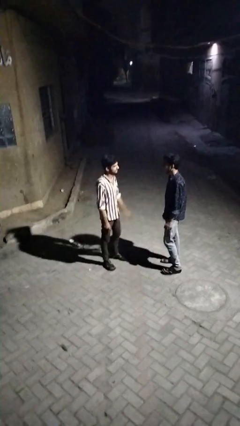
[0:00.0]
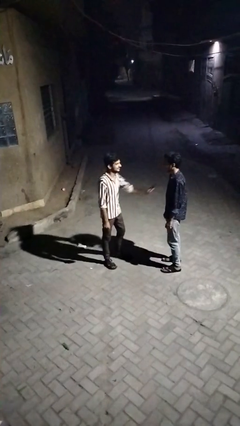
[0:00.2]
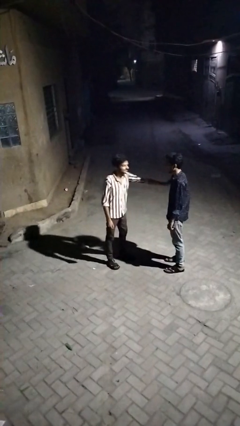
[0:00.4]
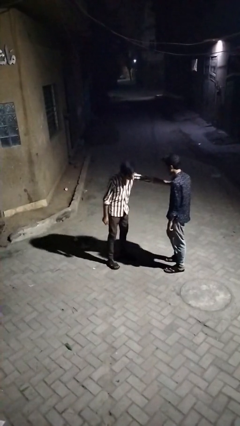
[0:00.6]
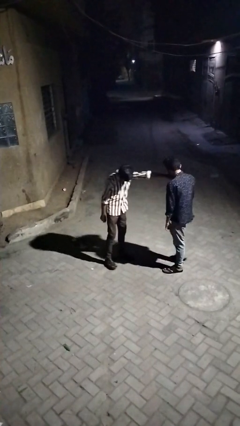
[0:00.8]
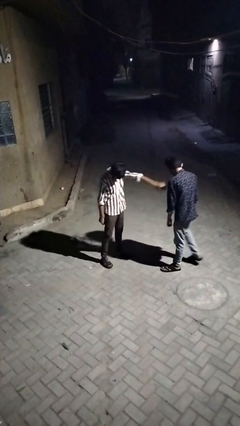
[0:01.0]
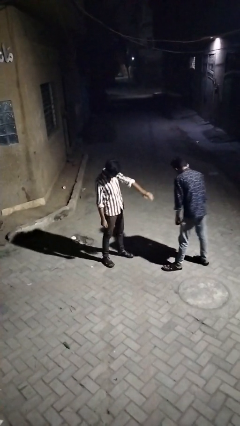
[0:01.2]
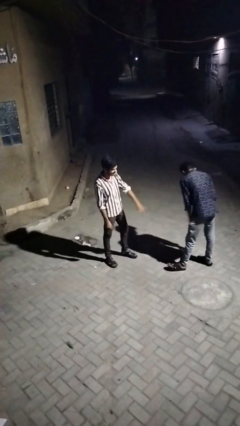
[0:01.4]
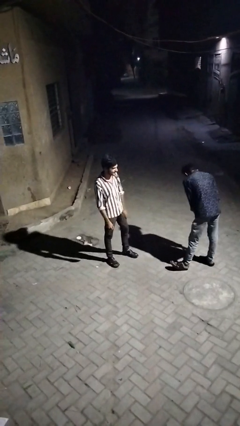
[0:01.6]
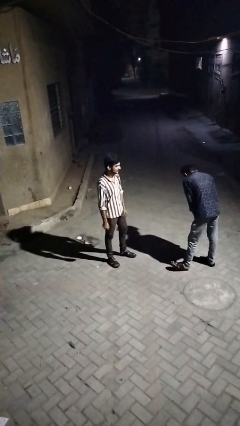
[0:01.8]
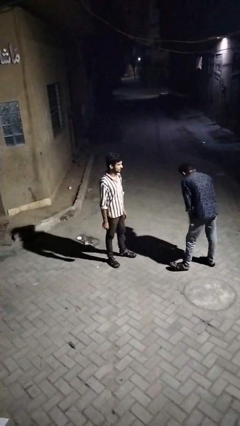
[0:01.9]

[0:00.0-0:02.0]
person shoves person

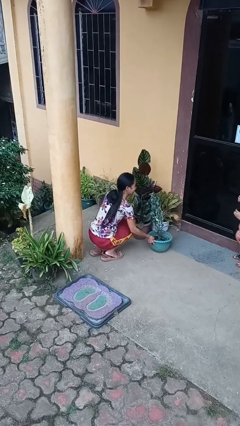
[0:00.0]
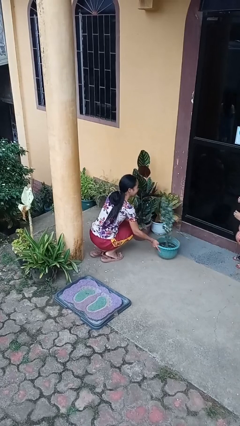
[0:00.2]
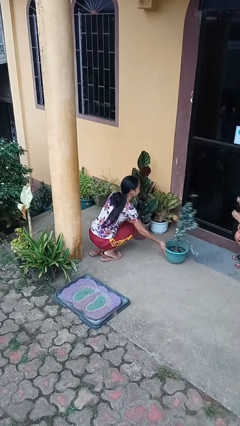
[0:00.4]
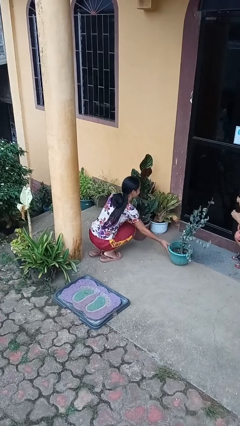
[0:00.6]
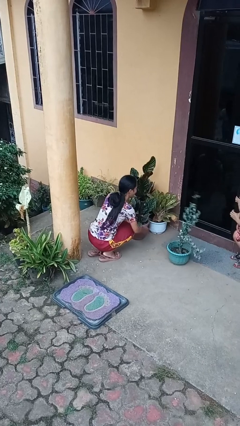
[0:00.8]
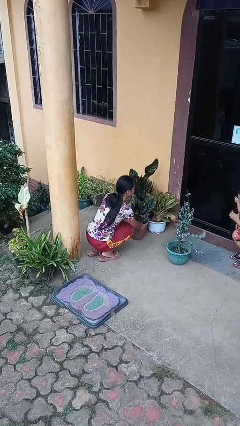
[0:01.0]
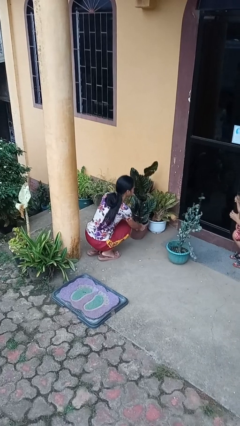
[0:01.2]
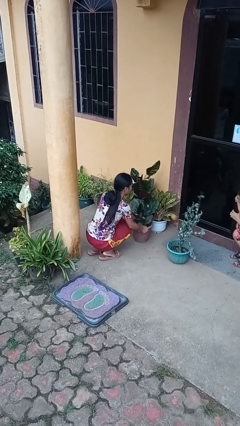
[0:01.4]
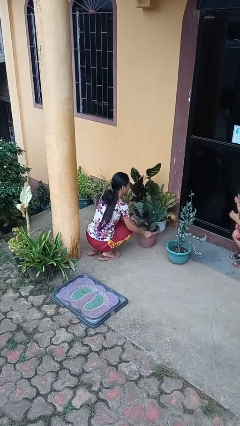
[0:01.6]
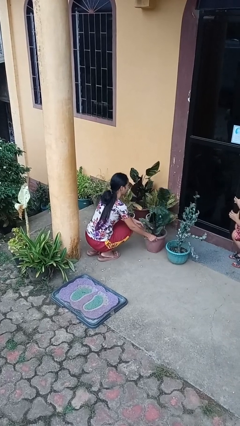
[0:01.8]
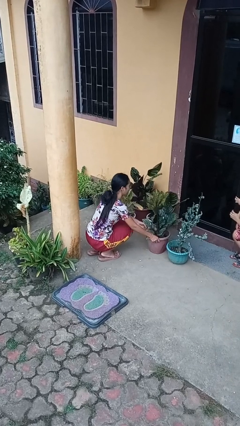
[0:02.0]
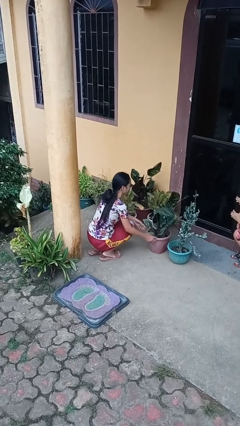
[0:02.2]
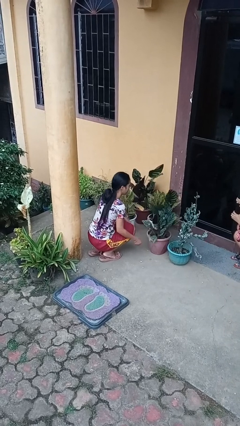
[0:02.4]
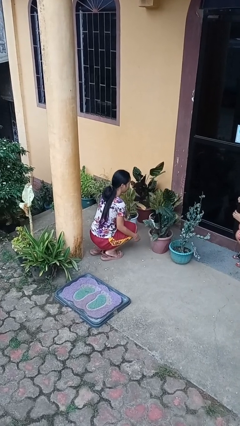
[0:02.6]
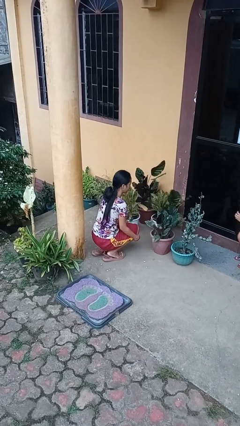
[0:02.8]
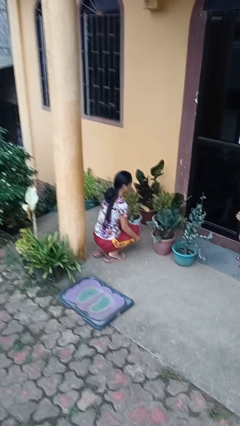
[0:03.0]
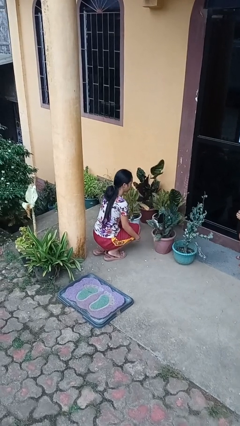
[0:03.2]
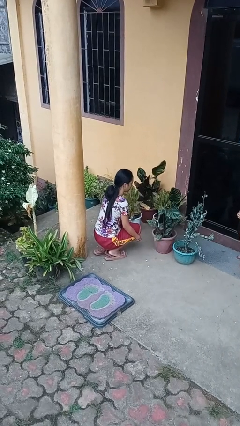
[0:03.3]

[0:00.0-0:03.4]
person arranges flowers in vase

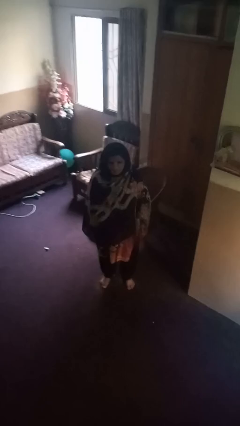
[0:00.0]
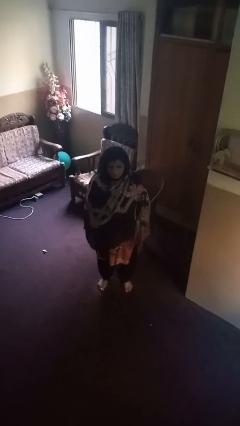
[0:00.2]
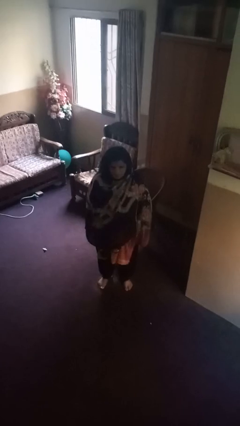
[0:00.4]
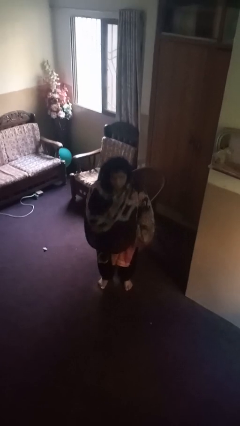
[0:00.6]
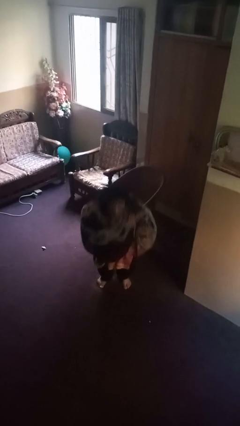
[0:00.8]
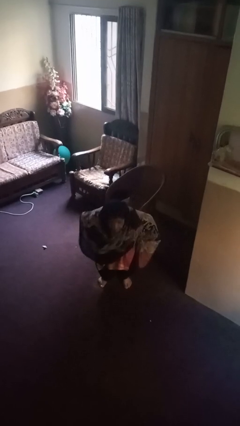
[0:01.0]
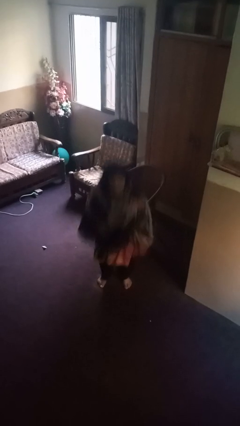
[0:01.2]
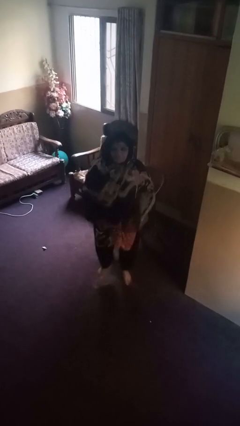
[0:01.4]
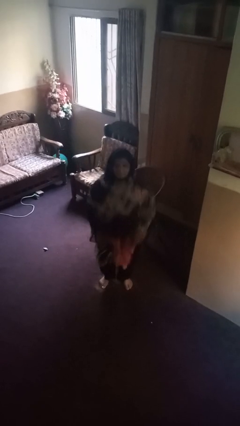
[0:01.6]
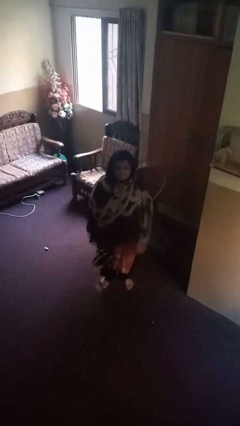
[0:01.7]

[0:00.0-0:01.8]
person jumps

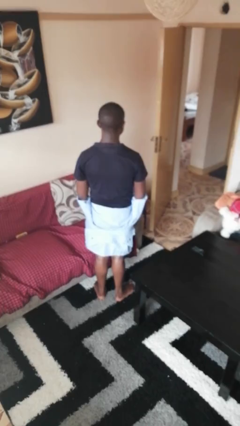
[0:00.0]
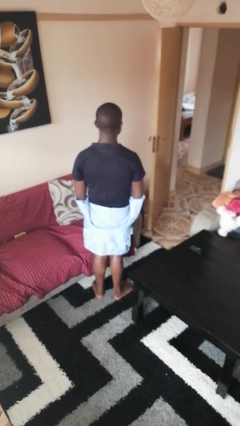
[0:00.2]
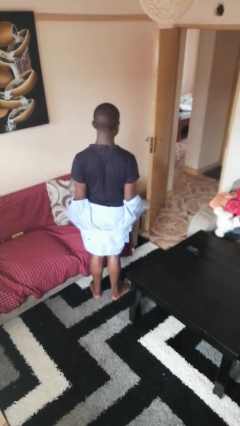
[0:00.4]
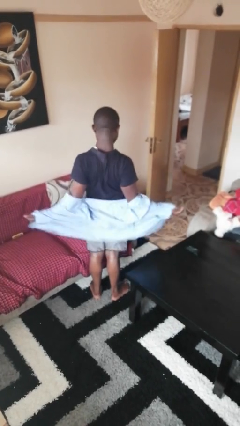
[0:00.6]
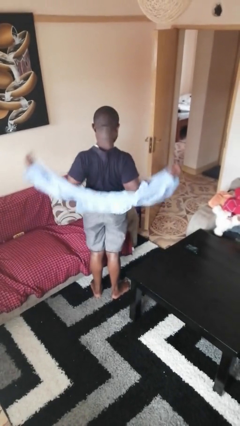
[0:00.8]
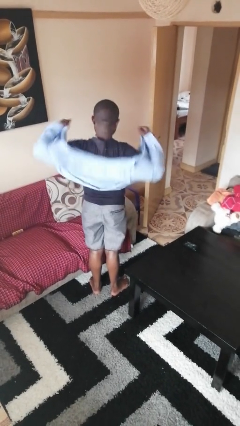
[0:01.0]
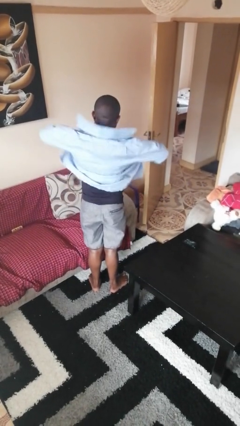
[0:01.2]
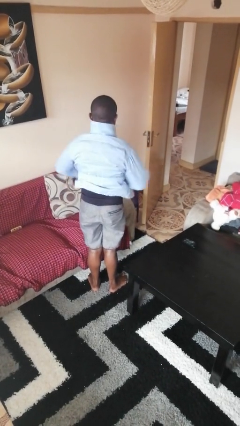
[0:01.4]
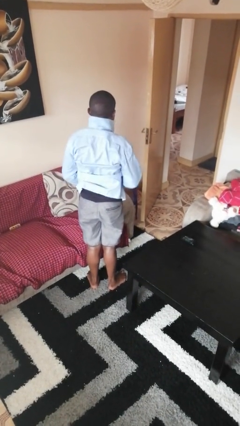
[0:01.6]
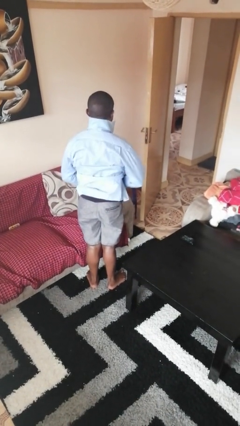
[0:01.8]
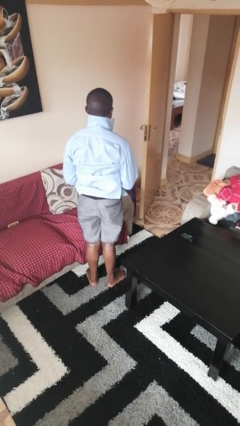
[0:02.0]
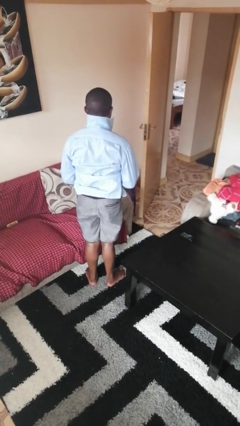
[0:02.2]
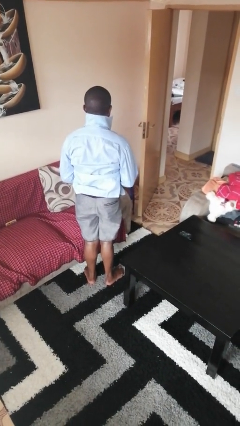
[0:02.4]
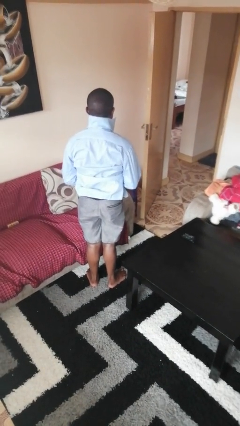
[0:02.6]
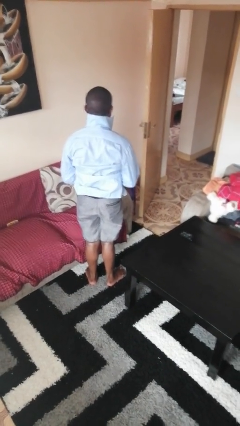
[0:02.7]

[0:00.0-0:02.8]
person puts on shirt

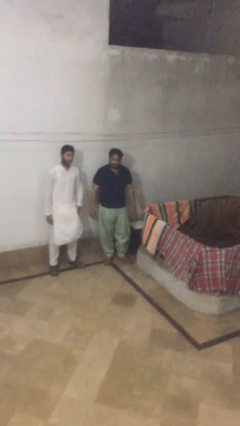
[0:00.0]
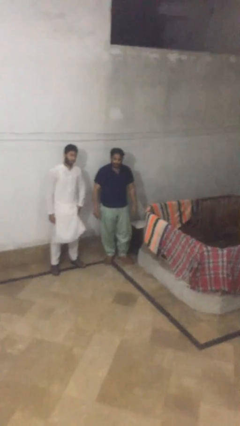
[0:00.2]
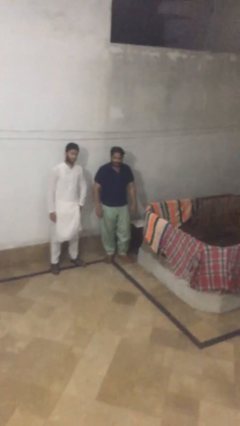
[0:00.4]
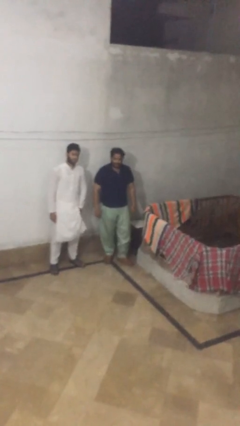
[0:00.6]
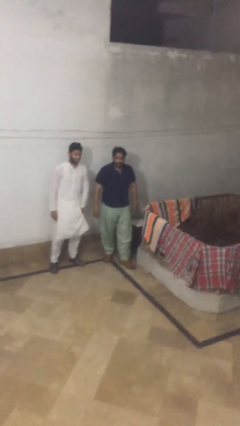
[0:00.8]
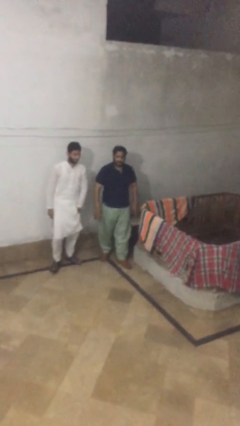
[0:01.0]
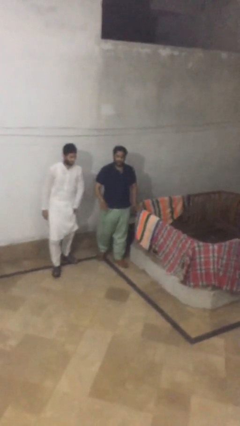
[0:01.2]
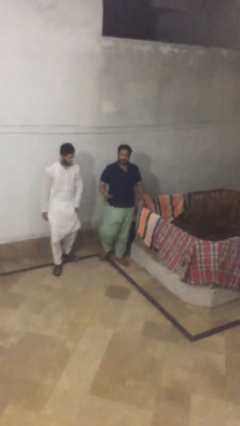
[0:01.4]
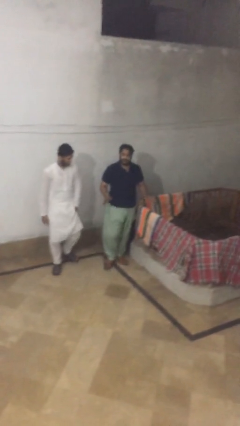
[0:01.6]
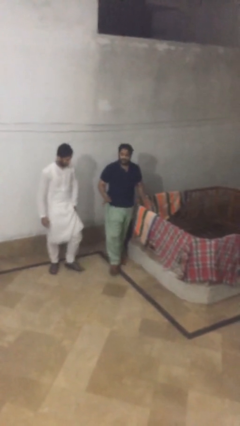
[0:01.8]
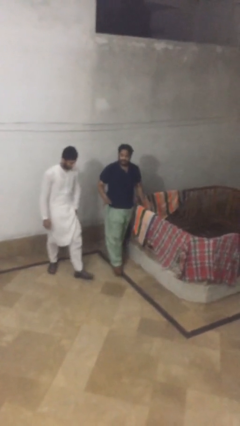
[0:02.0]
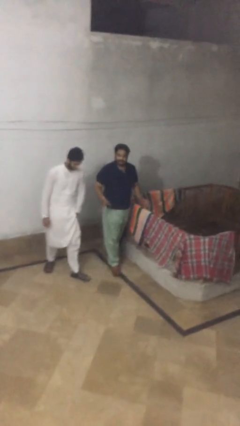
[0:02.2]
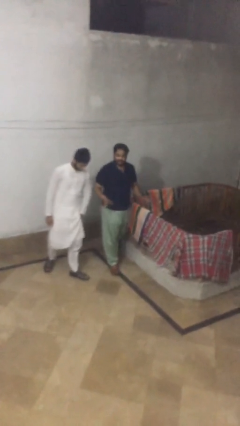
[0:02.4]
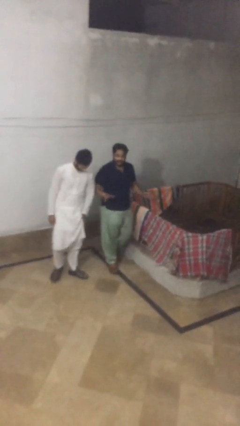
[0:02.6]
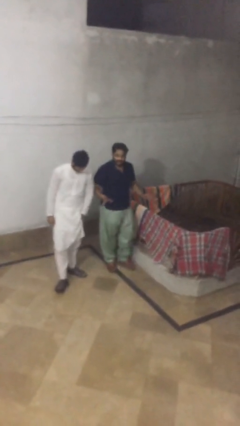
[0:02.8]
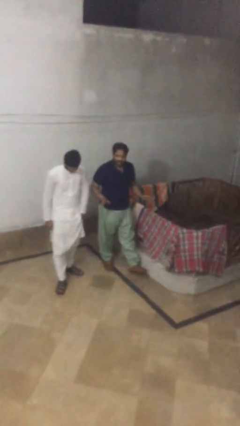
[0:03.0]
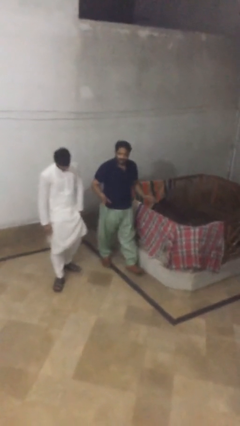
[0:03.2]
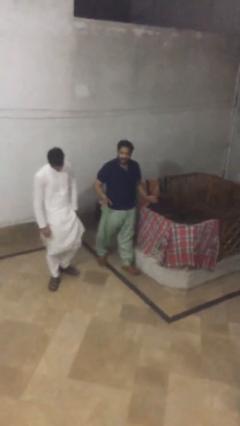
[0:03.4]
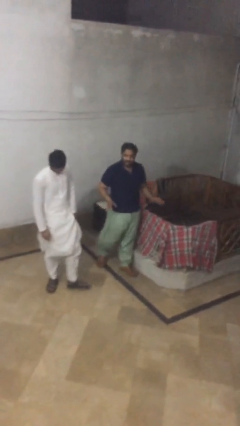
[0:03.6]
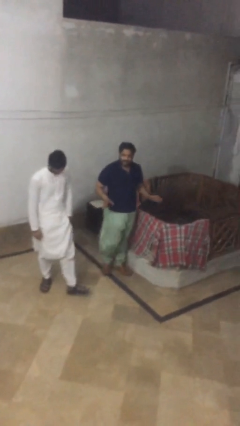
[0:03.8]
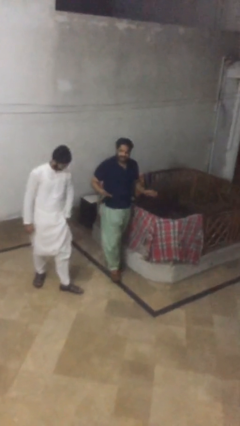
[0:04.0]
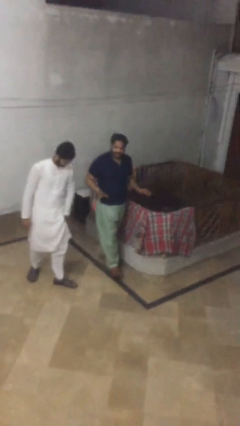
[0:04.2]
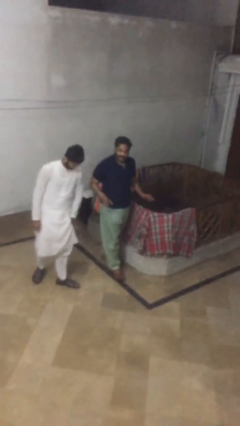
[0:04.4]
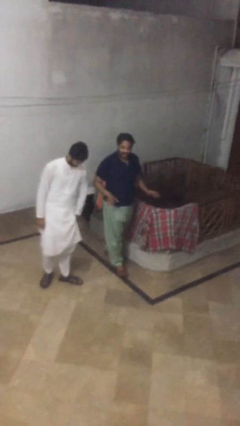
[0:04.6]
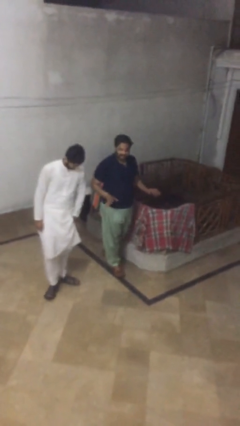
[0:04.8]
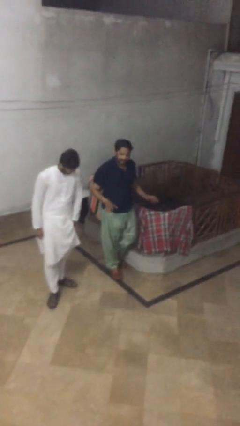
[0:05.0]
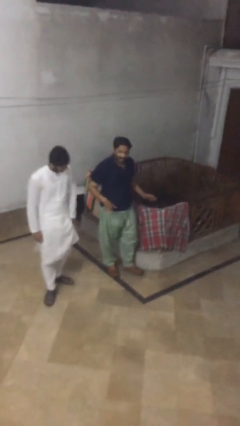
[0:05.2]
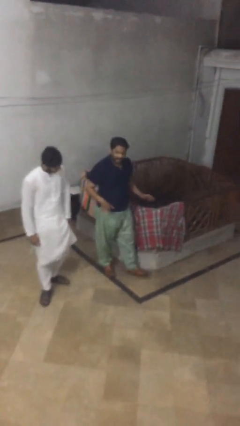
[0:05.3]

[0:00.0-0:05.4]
person talks to person

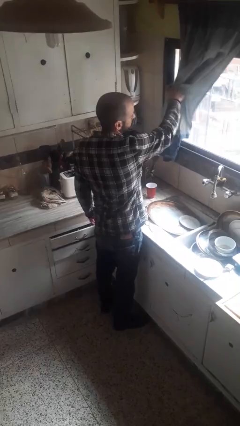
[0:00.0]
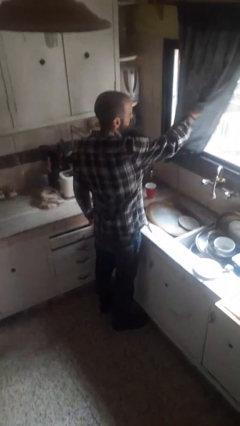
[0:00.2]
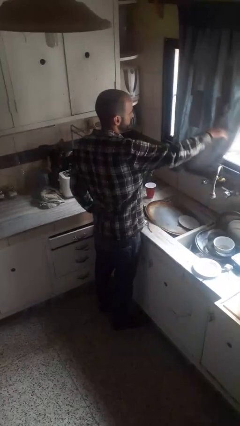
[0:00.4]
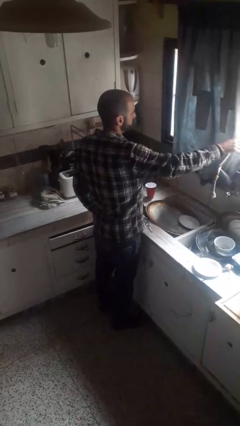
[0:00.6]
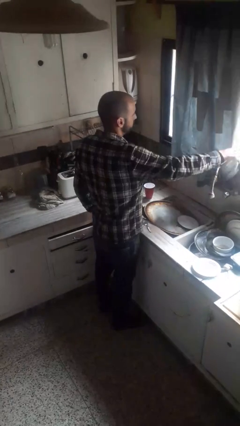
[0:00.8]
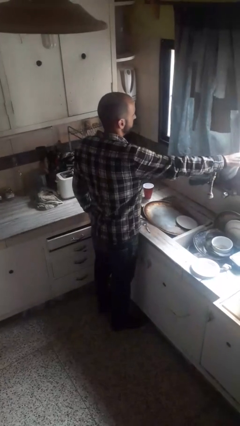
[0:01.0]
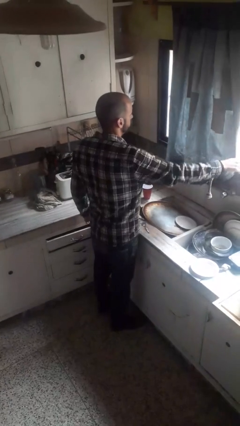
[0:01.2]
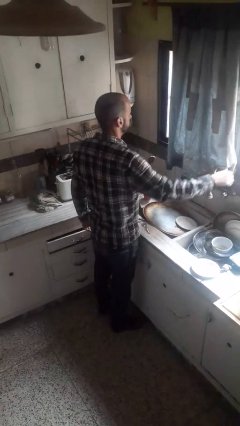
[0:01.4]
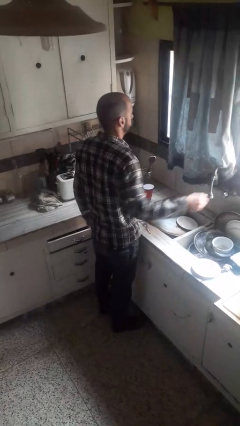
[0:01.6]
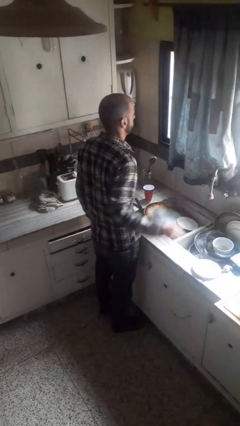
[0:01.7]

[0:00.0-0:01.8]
person closes curtains
